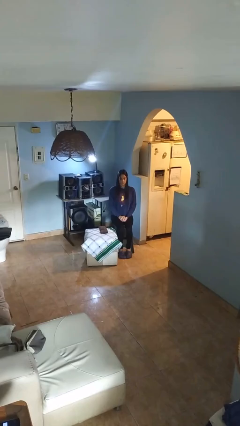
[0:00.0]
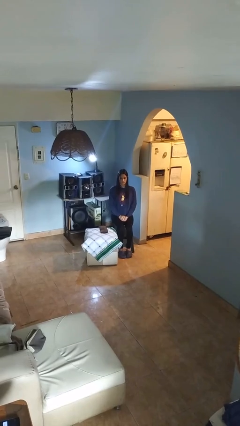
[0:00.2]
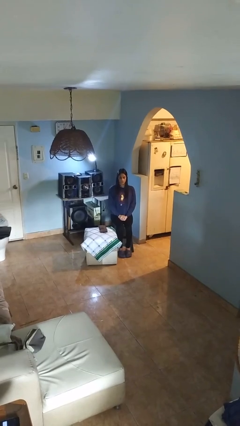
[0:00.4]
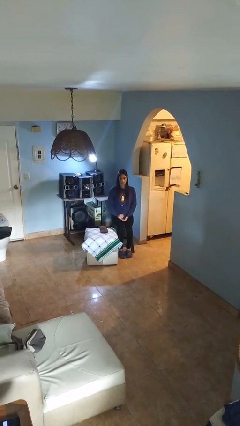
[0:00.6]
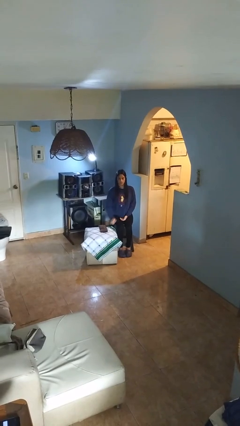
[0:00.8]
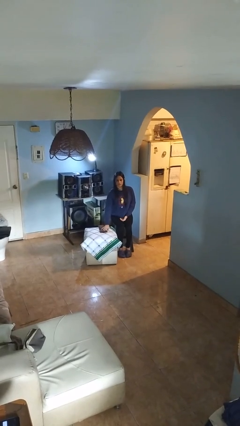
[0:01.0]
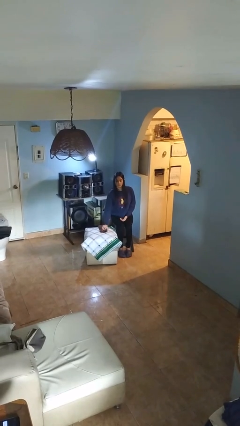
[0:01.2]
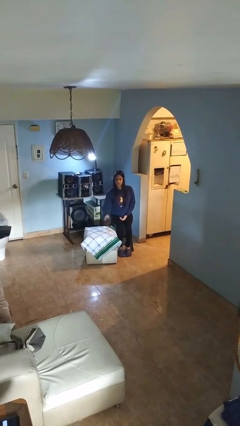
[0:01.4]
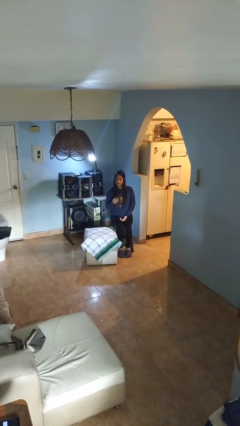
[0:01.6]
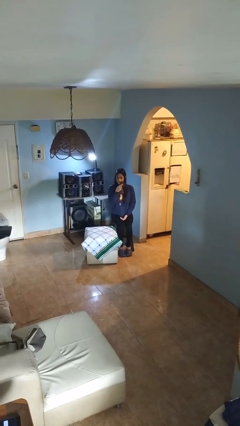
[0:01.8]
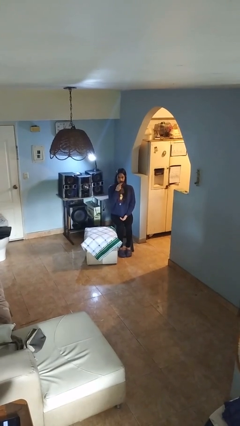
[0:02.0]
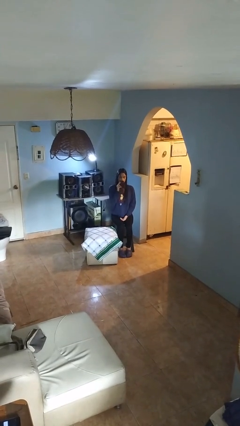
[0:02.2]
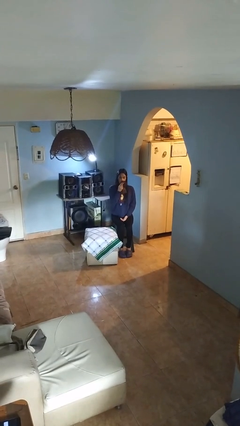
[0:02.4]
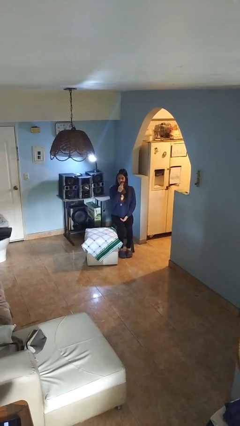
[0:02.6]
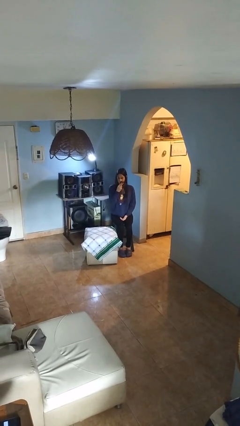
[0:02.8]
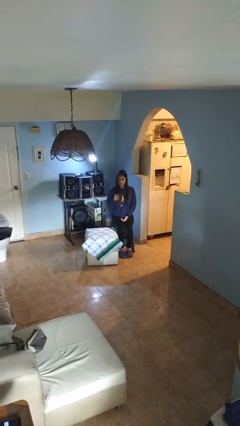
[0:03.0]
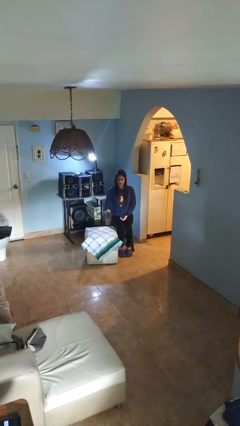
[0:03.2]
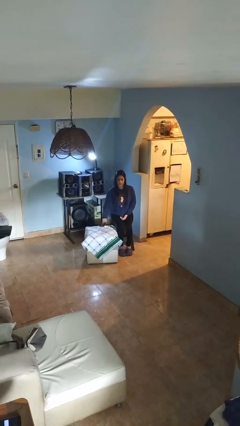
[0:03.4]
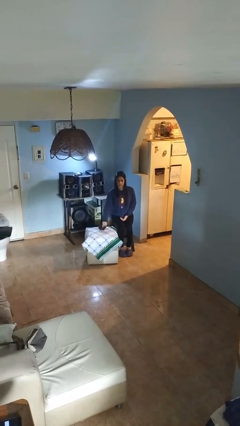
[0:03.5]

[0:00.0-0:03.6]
person wipes mouth with napkin

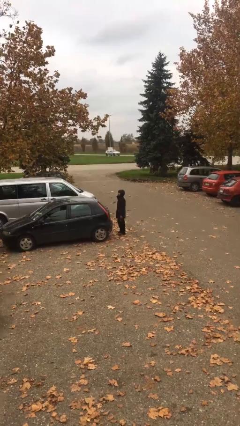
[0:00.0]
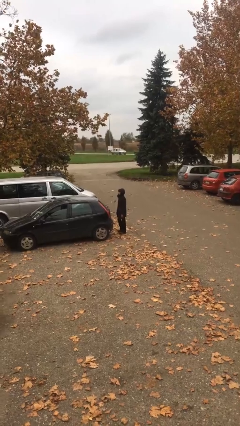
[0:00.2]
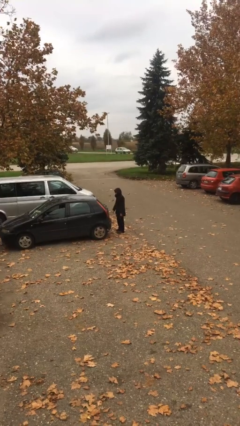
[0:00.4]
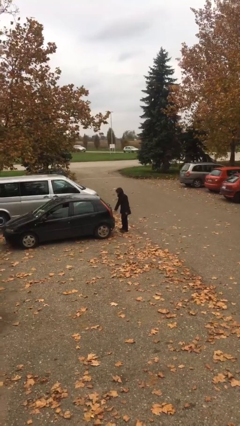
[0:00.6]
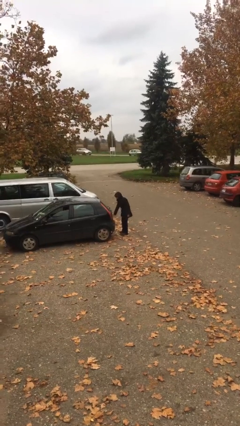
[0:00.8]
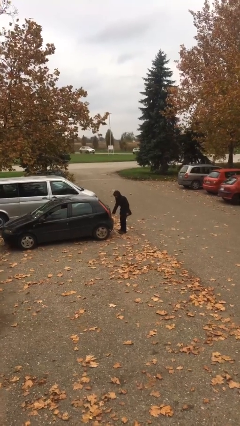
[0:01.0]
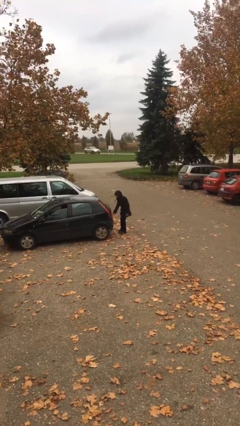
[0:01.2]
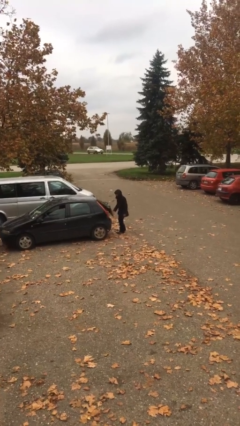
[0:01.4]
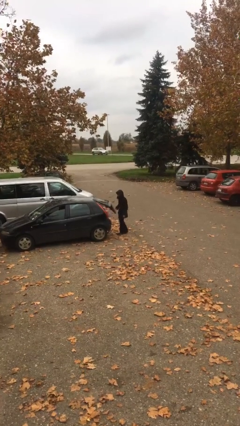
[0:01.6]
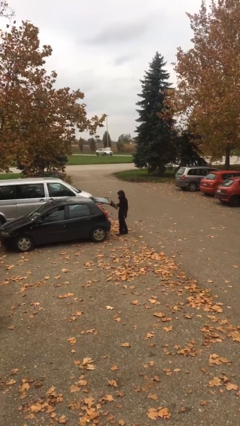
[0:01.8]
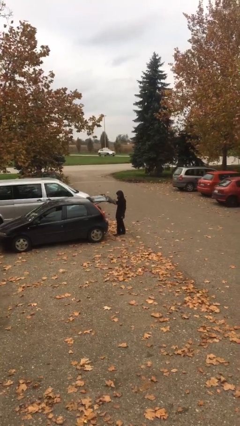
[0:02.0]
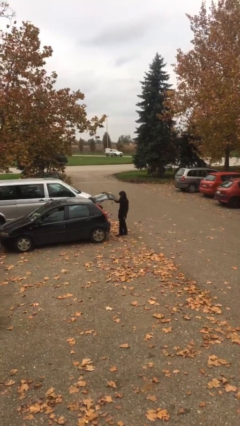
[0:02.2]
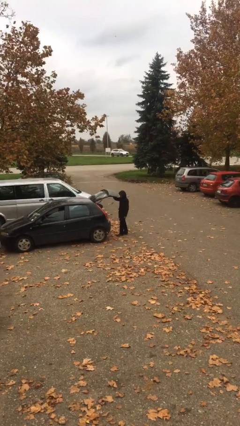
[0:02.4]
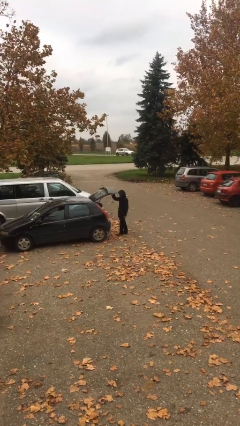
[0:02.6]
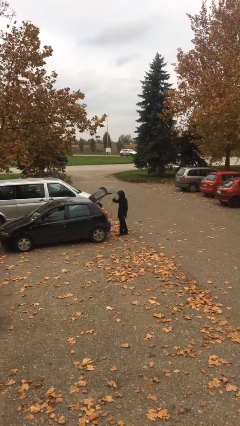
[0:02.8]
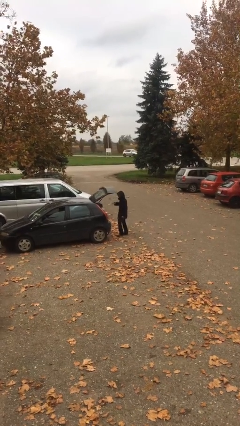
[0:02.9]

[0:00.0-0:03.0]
person opens car trunk

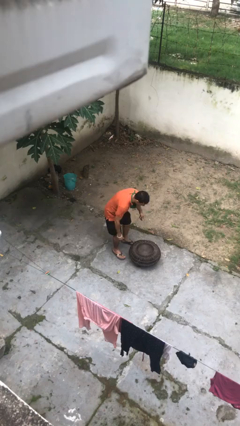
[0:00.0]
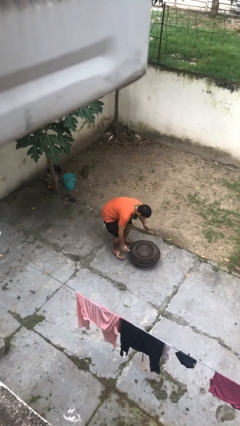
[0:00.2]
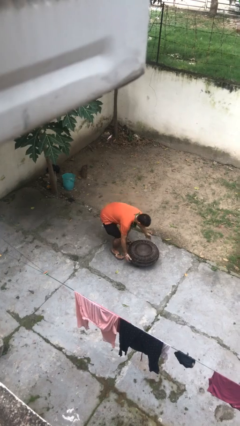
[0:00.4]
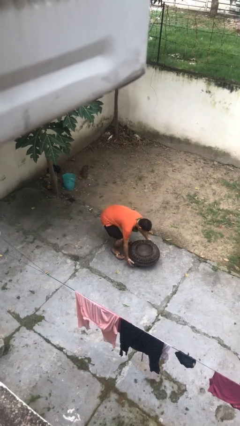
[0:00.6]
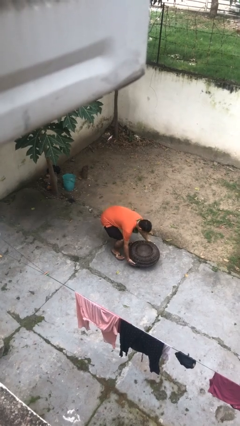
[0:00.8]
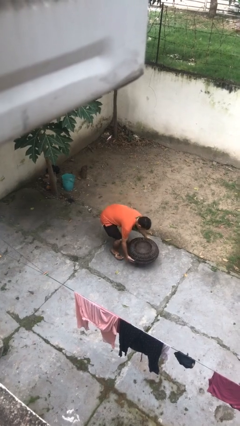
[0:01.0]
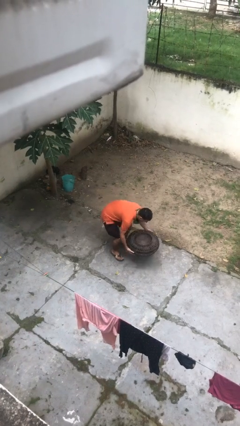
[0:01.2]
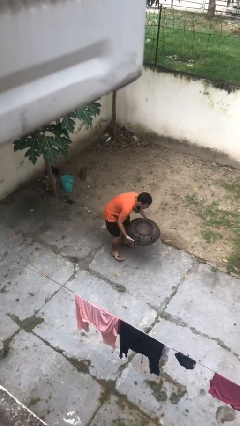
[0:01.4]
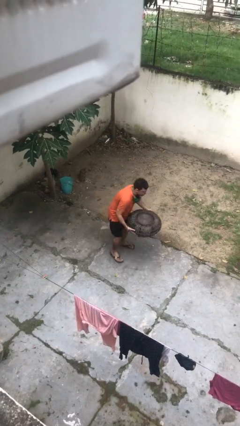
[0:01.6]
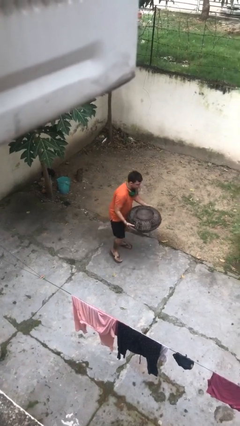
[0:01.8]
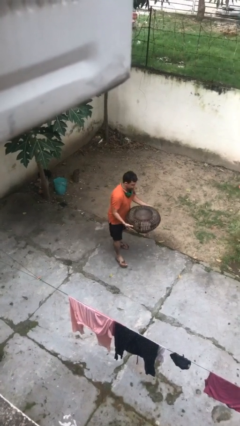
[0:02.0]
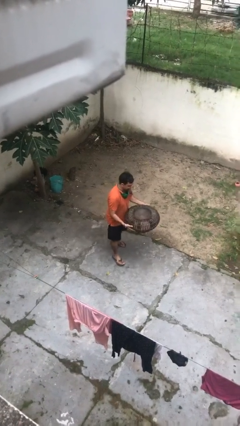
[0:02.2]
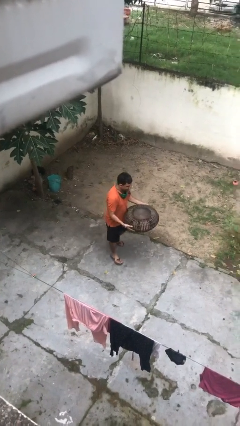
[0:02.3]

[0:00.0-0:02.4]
person picks up object from floor

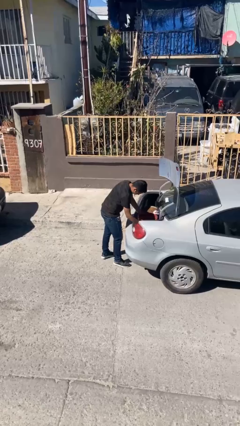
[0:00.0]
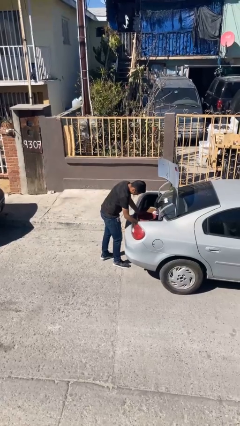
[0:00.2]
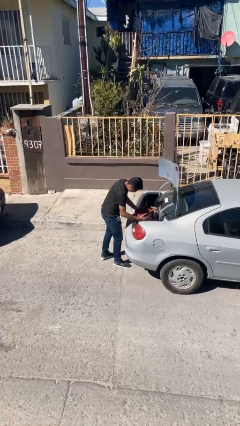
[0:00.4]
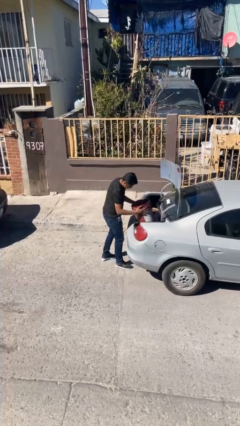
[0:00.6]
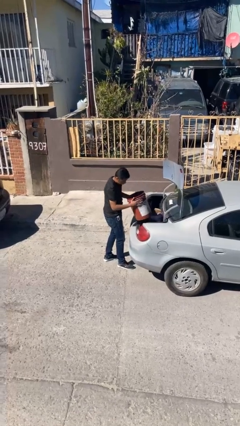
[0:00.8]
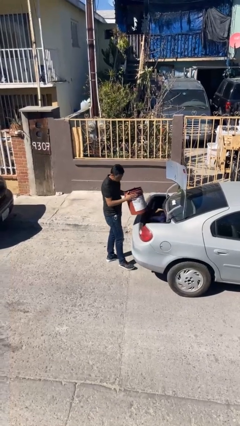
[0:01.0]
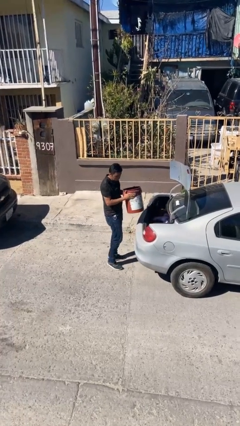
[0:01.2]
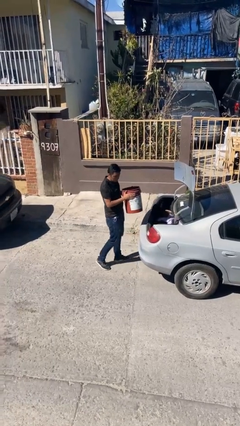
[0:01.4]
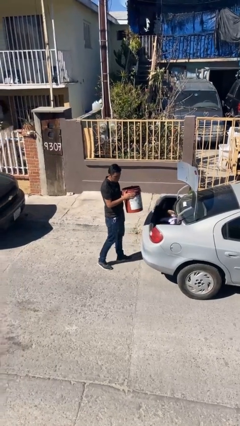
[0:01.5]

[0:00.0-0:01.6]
person unloads car

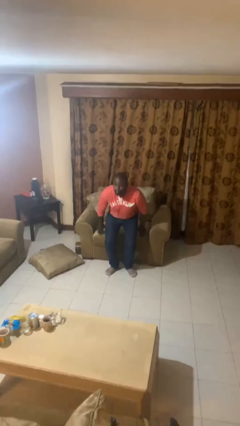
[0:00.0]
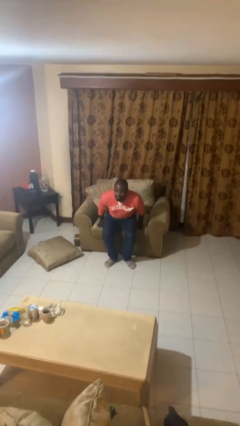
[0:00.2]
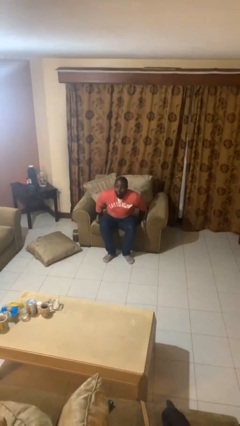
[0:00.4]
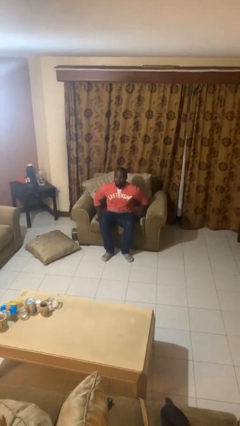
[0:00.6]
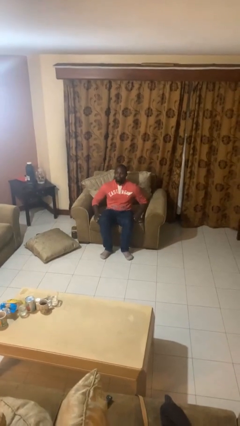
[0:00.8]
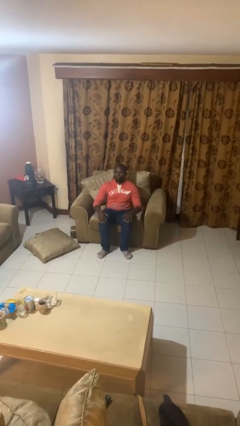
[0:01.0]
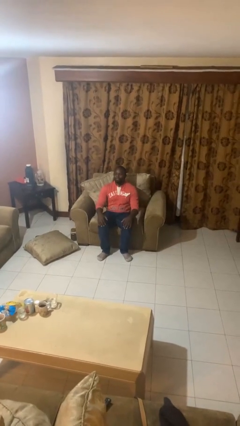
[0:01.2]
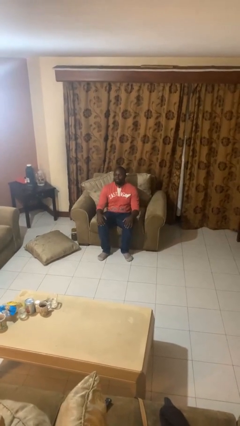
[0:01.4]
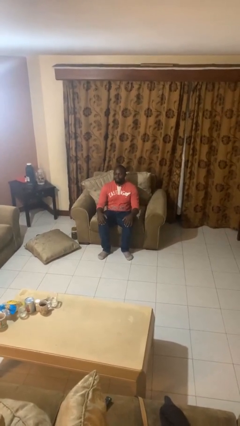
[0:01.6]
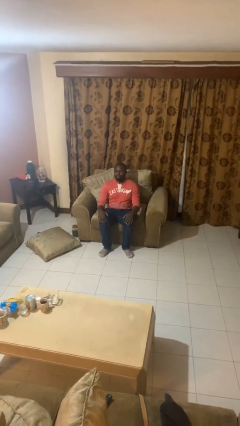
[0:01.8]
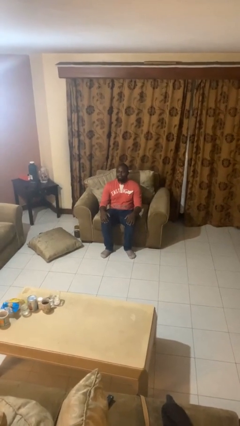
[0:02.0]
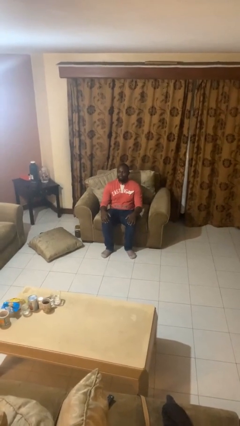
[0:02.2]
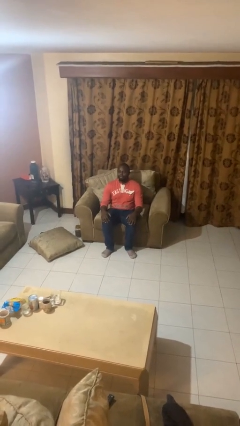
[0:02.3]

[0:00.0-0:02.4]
person sits down

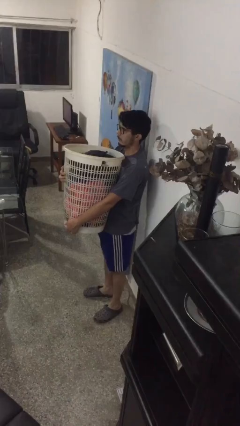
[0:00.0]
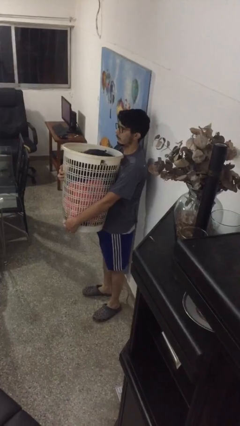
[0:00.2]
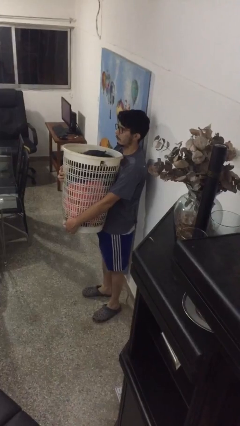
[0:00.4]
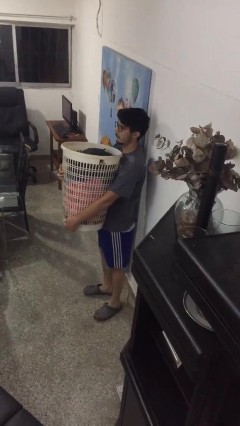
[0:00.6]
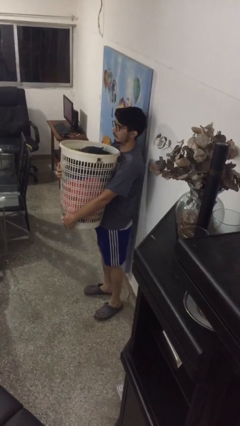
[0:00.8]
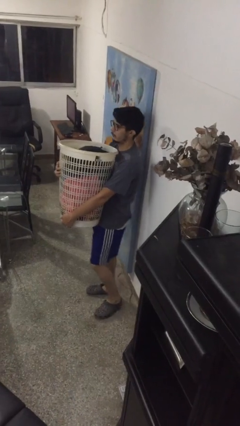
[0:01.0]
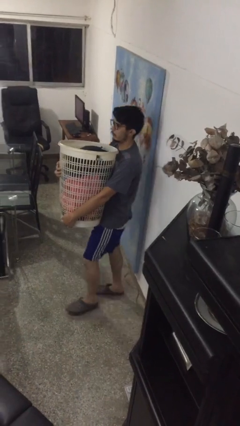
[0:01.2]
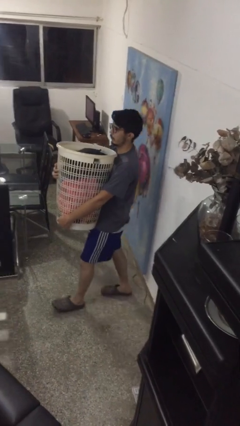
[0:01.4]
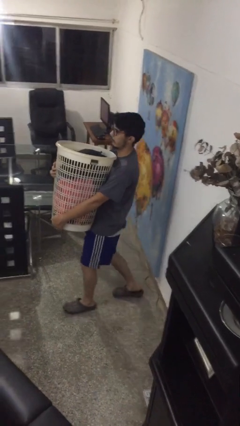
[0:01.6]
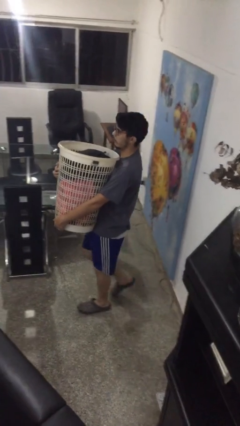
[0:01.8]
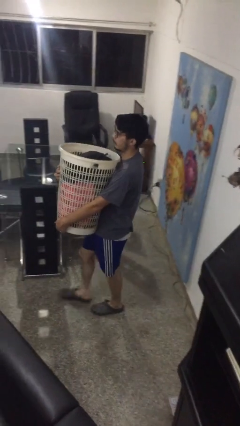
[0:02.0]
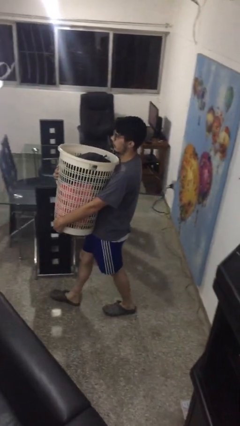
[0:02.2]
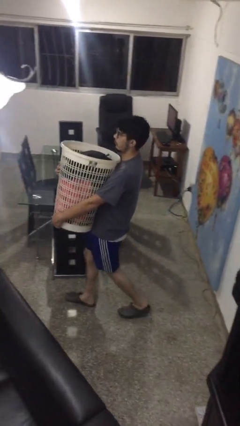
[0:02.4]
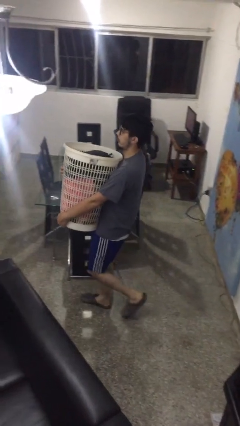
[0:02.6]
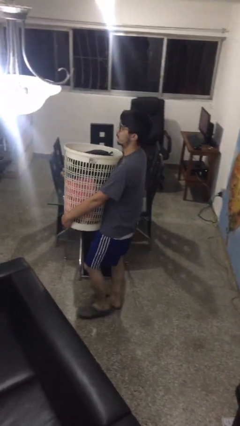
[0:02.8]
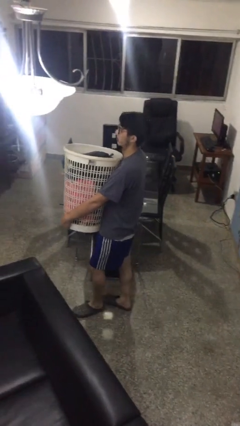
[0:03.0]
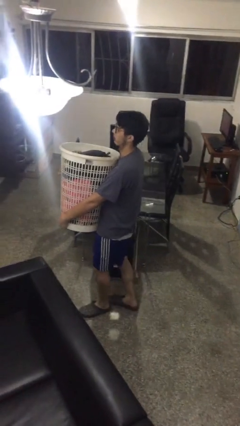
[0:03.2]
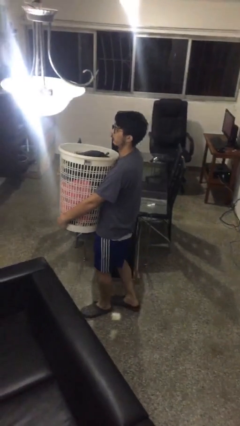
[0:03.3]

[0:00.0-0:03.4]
person carries laundry basket

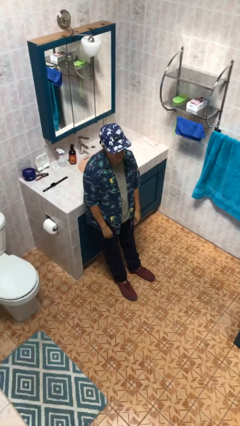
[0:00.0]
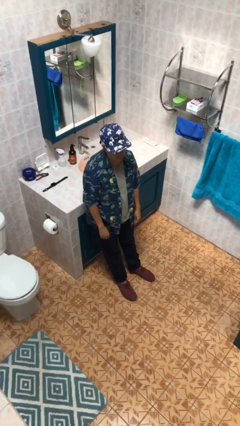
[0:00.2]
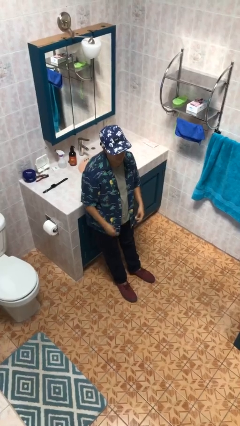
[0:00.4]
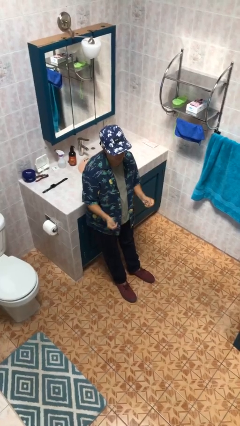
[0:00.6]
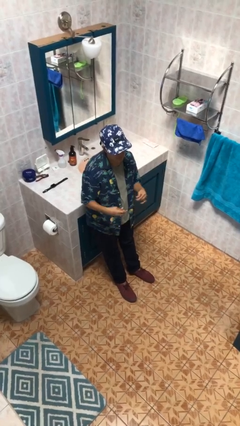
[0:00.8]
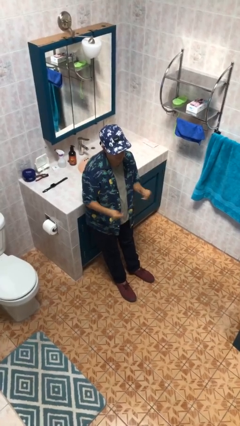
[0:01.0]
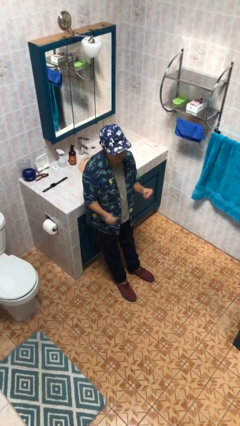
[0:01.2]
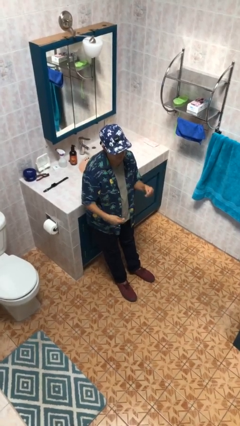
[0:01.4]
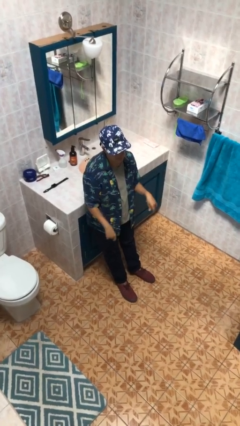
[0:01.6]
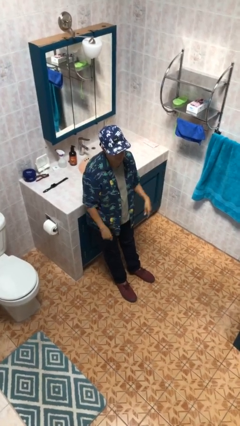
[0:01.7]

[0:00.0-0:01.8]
person snaps fingers
